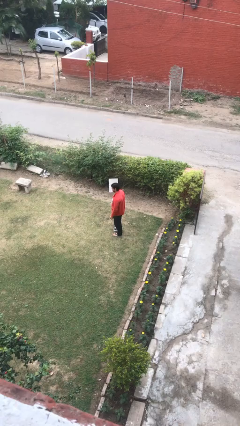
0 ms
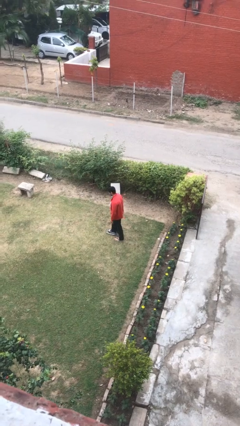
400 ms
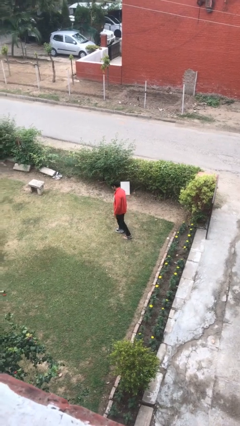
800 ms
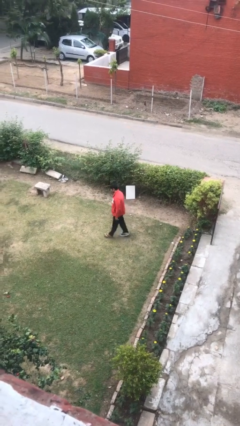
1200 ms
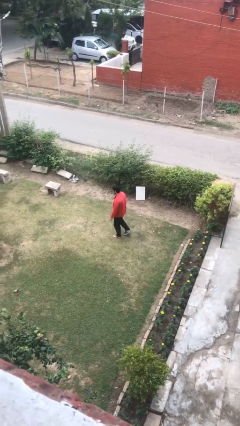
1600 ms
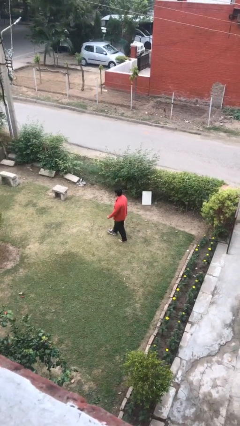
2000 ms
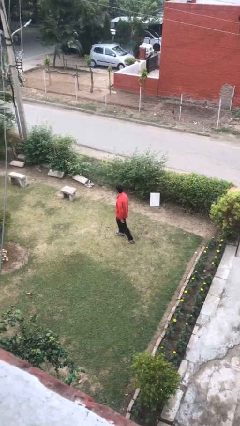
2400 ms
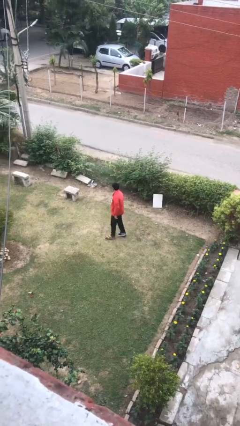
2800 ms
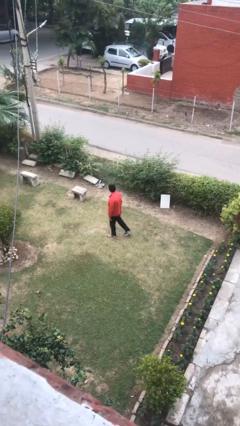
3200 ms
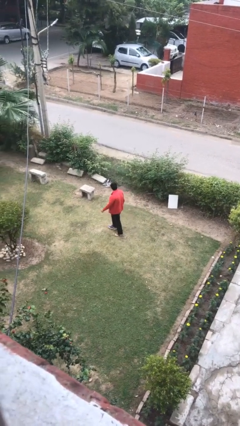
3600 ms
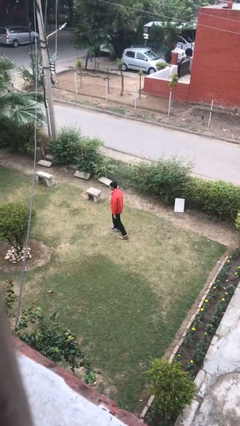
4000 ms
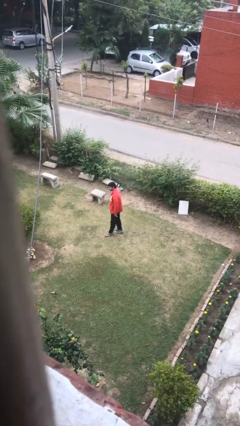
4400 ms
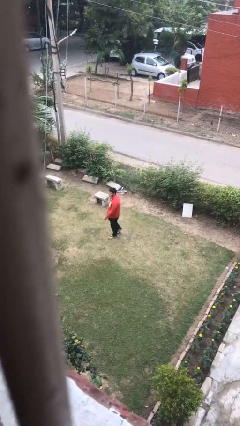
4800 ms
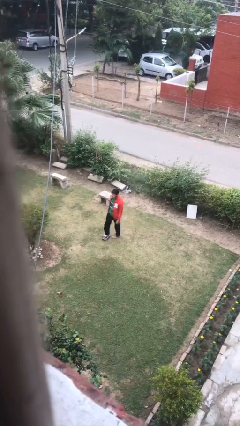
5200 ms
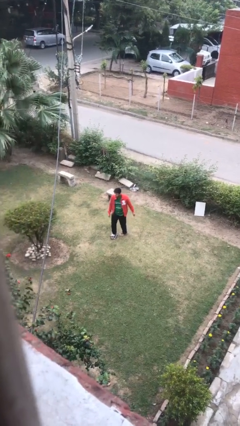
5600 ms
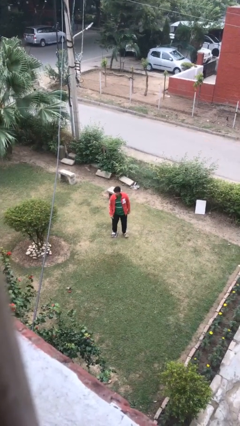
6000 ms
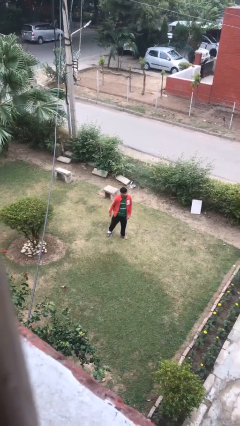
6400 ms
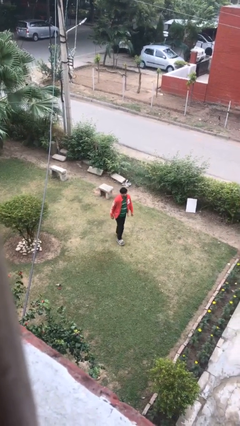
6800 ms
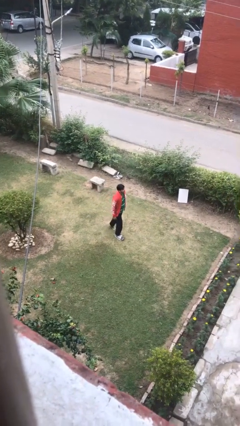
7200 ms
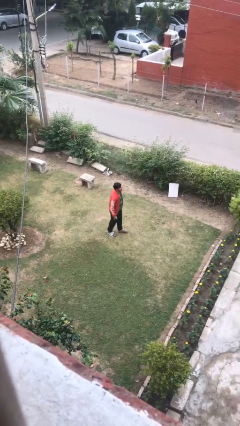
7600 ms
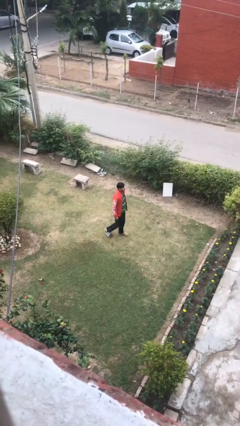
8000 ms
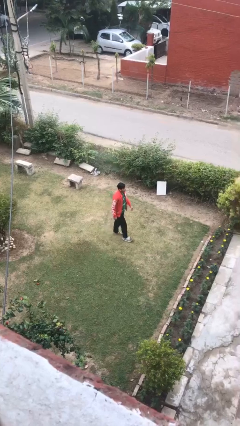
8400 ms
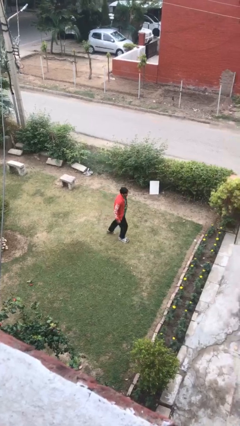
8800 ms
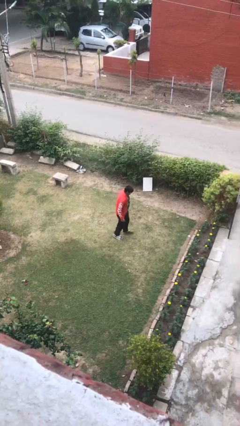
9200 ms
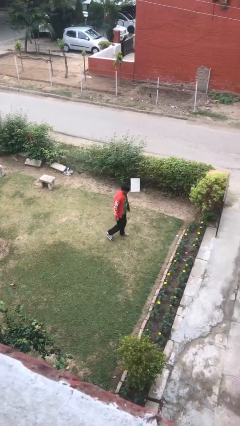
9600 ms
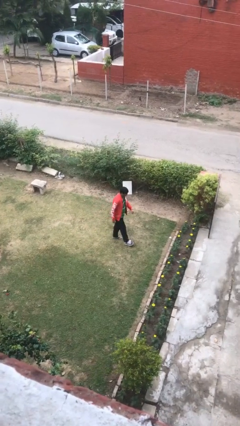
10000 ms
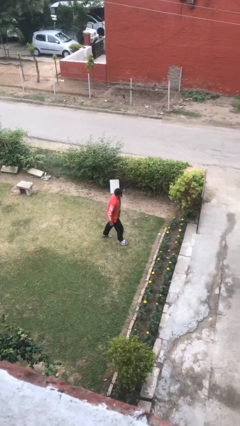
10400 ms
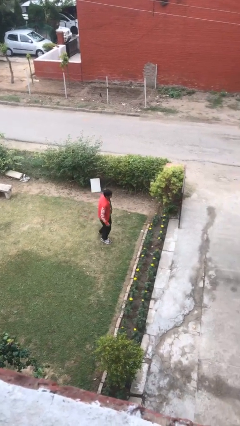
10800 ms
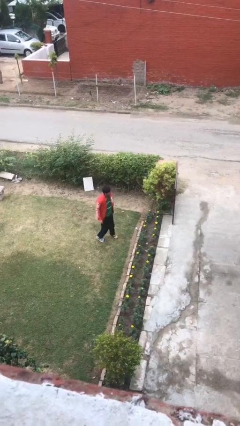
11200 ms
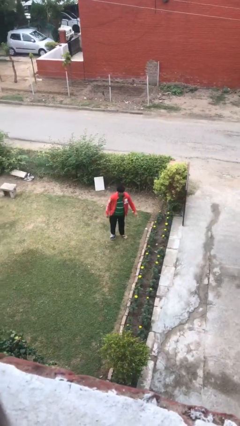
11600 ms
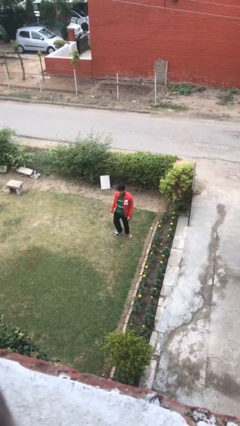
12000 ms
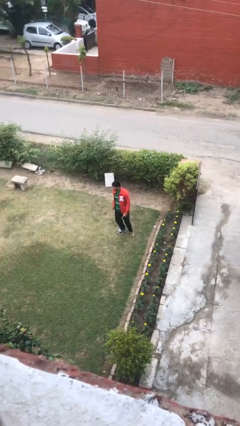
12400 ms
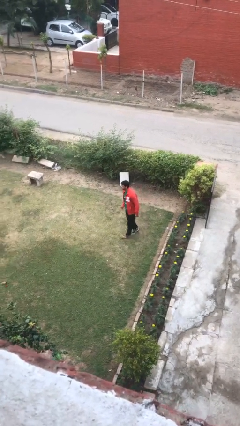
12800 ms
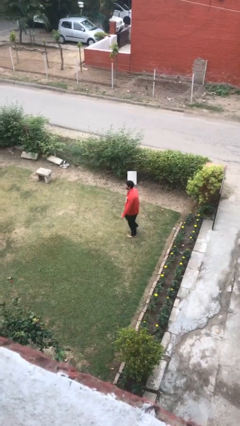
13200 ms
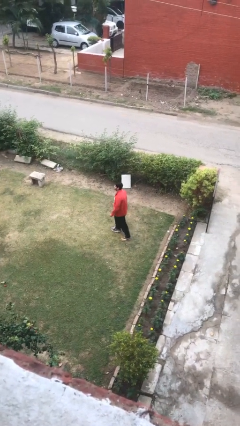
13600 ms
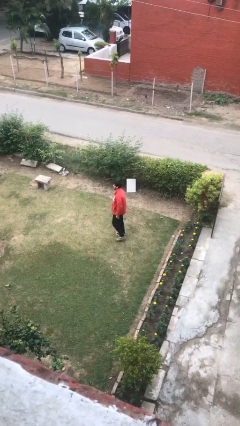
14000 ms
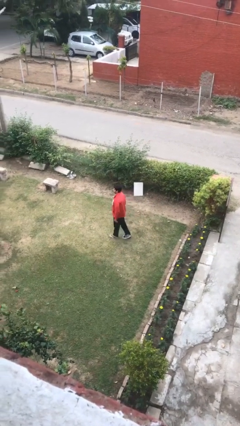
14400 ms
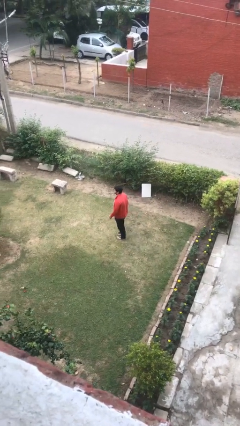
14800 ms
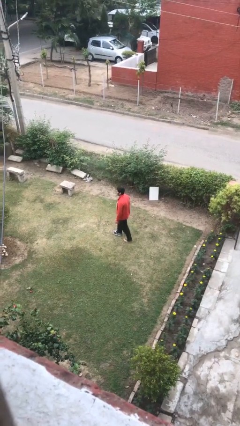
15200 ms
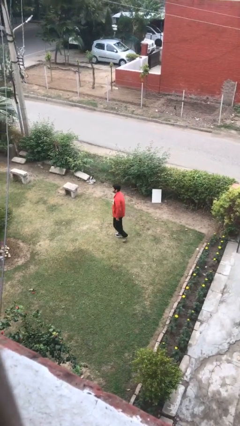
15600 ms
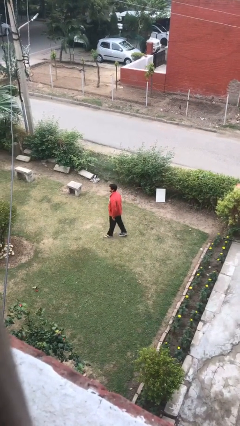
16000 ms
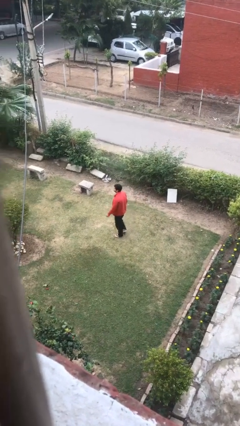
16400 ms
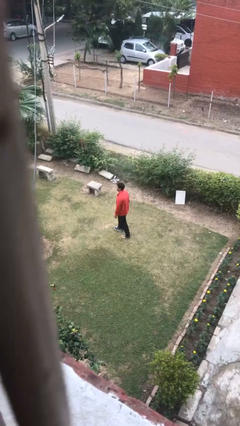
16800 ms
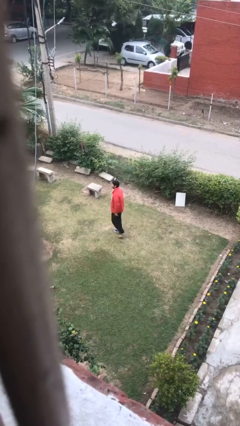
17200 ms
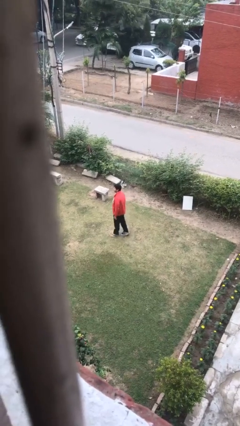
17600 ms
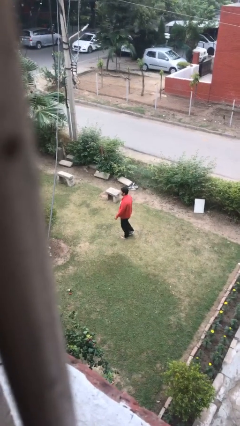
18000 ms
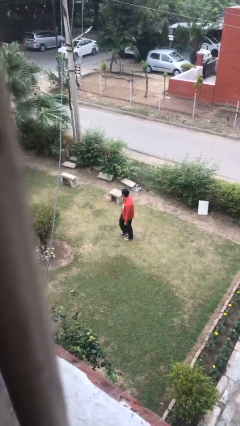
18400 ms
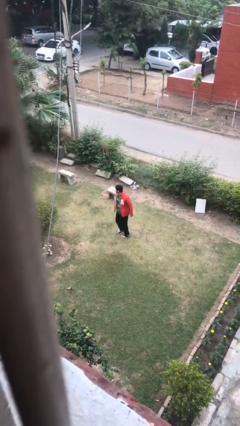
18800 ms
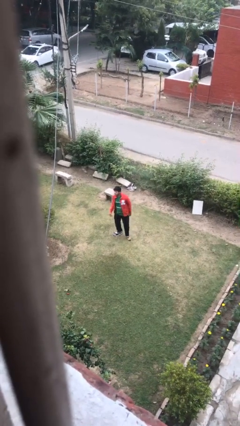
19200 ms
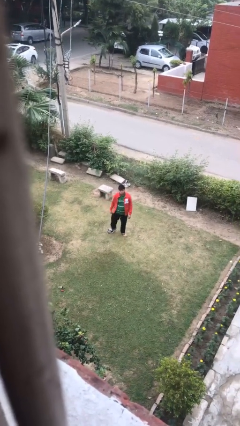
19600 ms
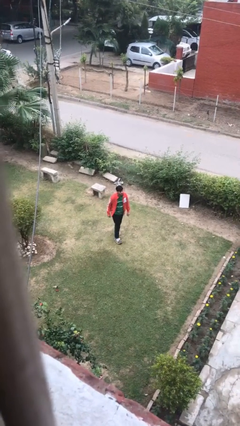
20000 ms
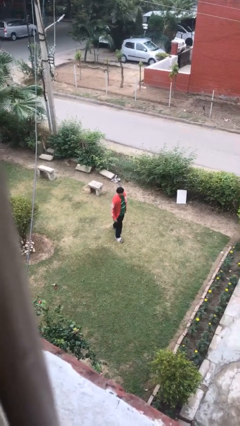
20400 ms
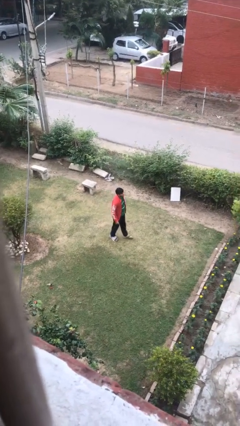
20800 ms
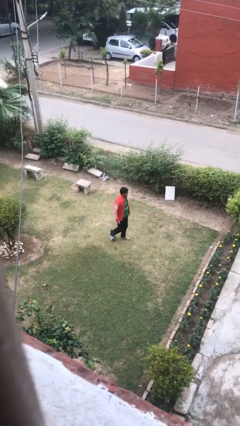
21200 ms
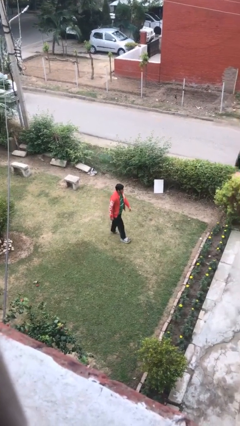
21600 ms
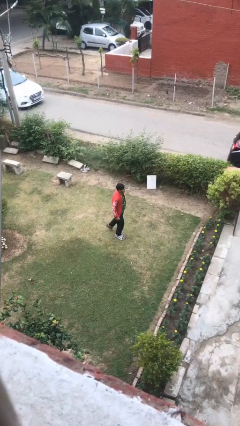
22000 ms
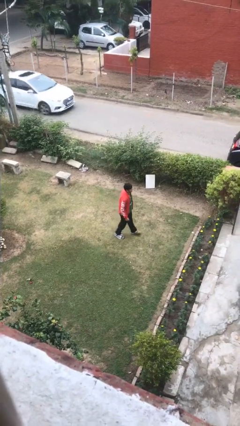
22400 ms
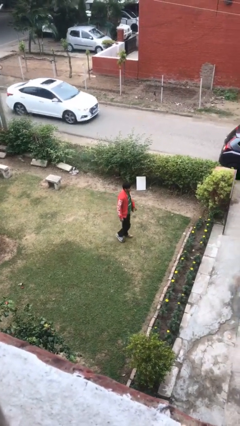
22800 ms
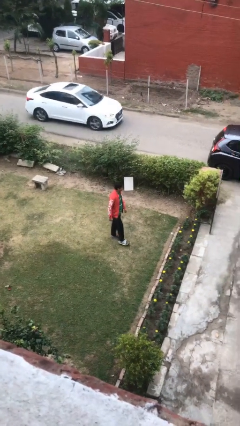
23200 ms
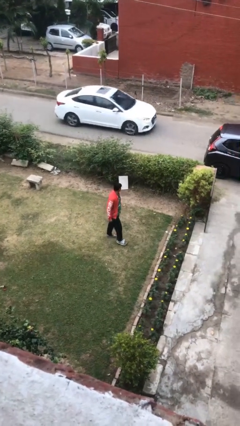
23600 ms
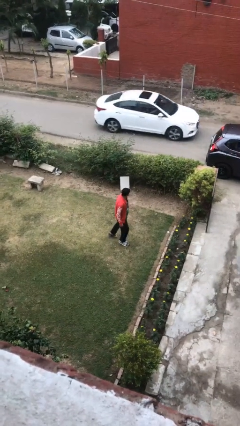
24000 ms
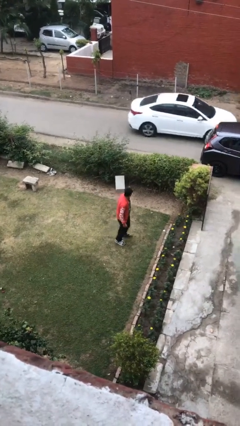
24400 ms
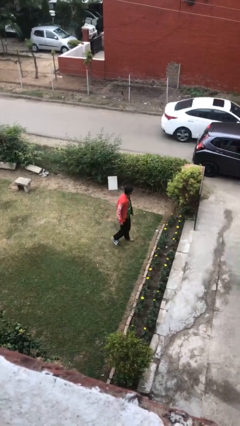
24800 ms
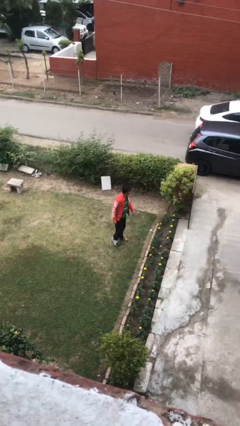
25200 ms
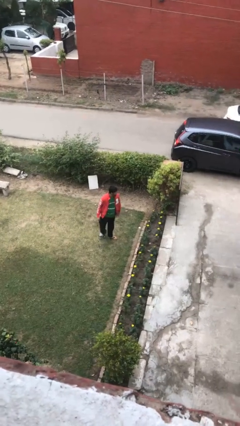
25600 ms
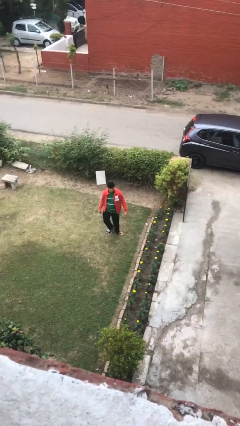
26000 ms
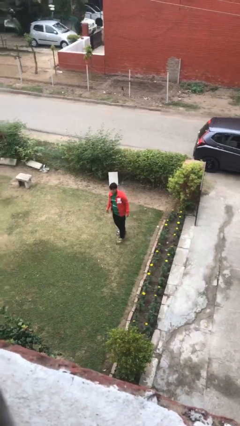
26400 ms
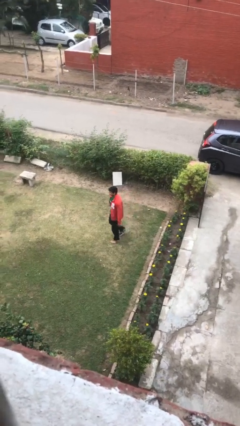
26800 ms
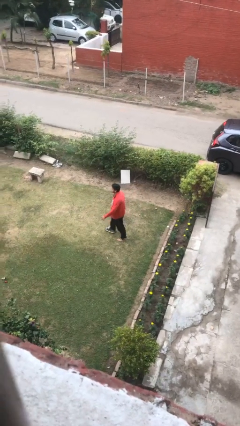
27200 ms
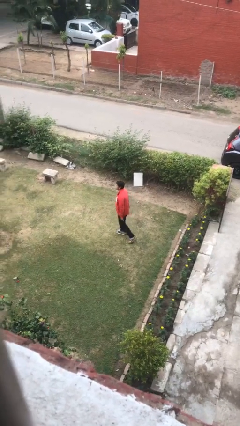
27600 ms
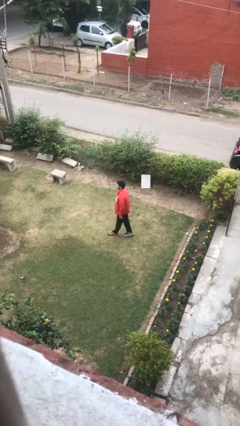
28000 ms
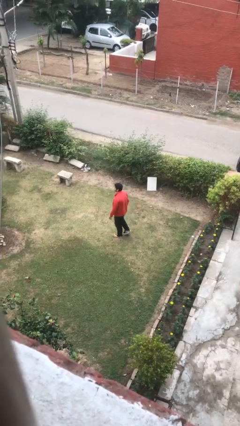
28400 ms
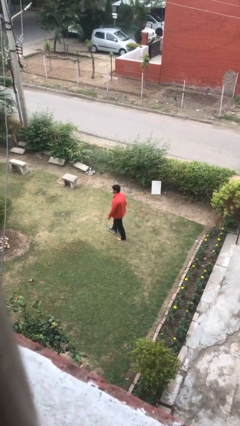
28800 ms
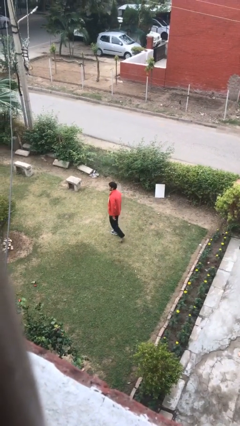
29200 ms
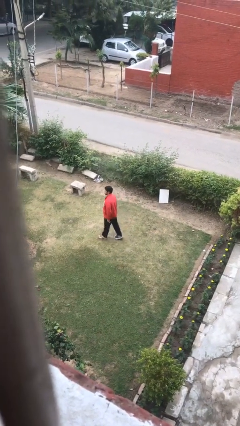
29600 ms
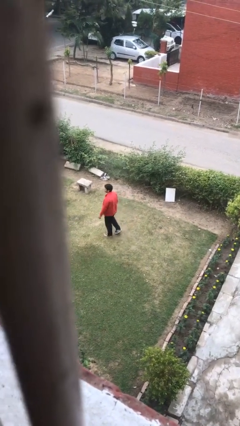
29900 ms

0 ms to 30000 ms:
person walks

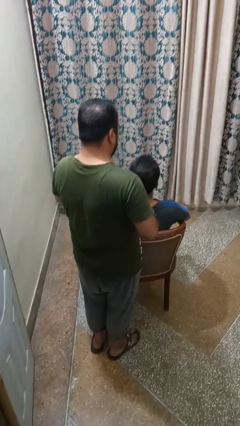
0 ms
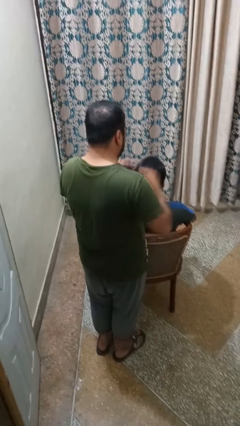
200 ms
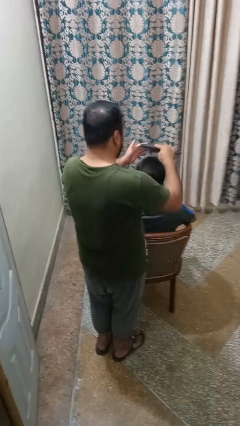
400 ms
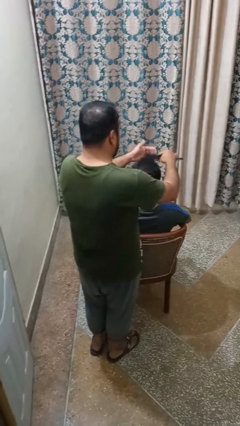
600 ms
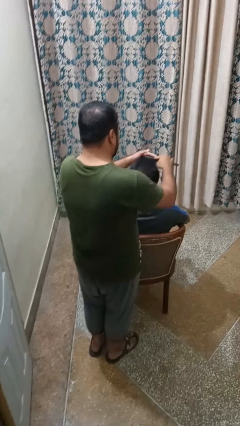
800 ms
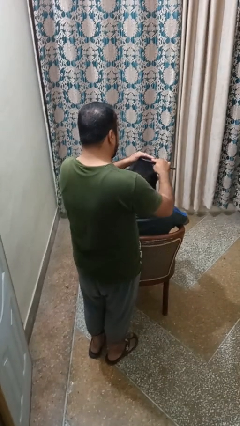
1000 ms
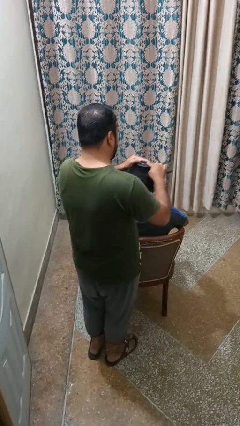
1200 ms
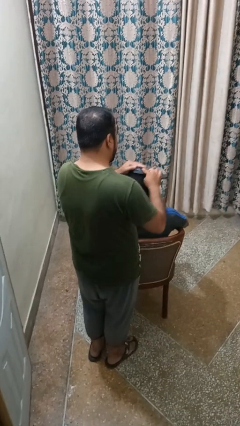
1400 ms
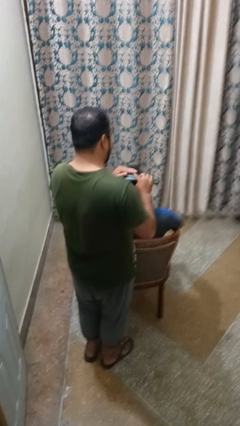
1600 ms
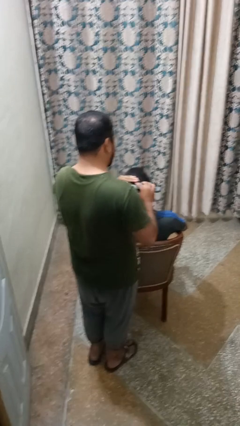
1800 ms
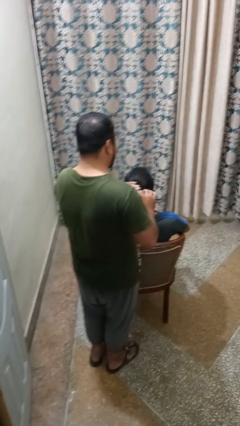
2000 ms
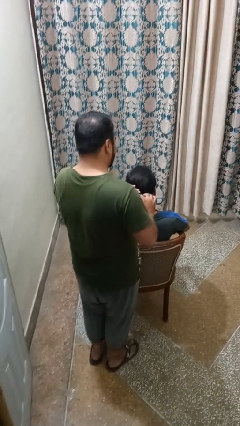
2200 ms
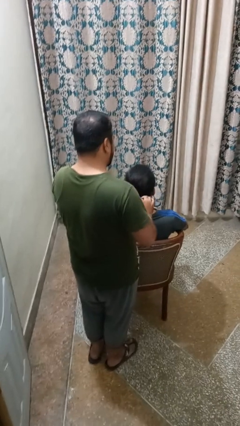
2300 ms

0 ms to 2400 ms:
person brushes hair of person

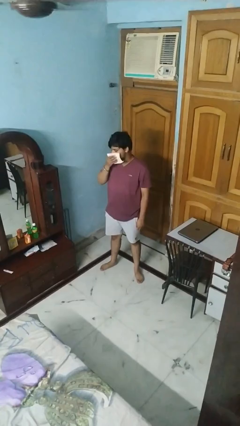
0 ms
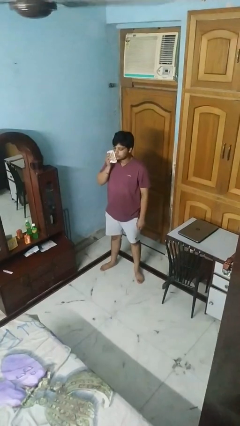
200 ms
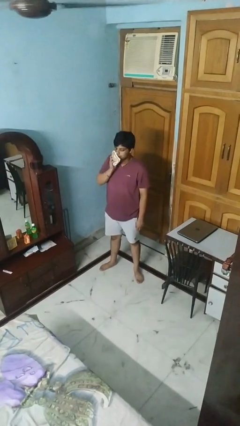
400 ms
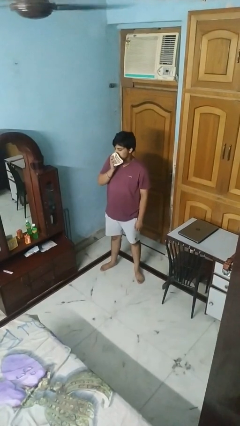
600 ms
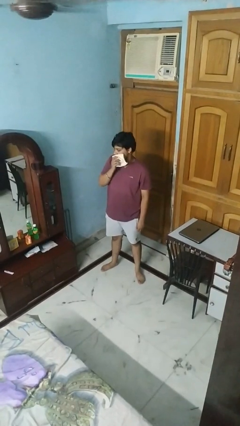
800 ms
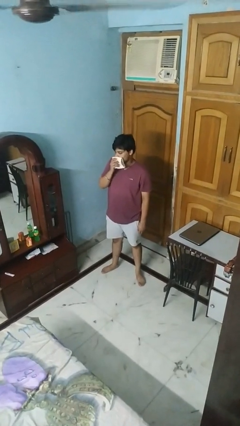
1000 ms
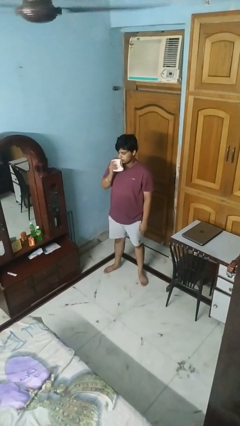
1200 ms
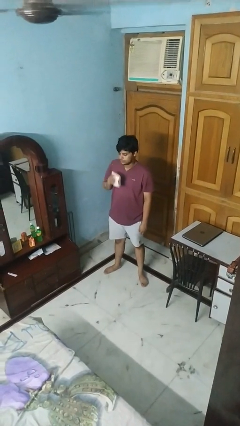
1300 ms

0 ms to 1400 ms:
person wipes mouth with napkin
